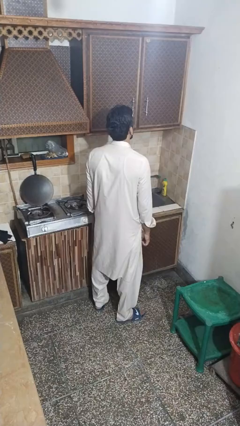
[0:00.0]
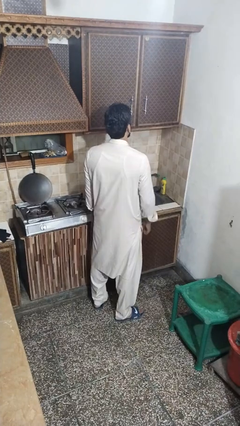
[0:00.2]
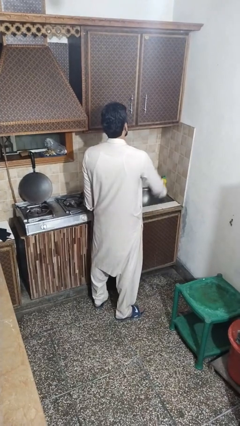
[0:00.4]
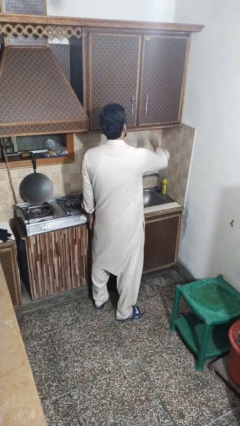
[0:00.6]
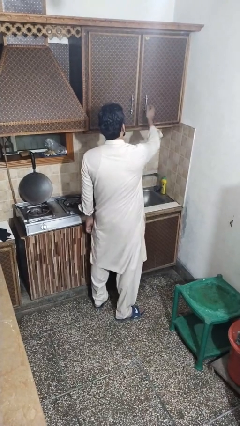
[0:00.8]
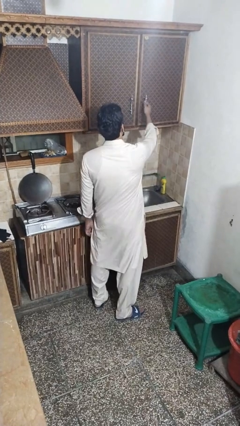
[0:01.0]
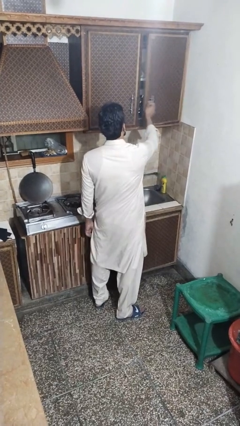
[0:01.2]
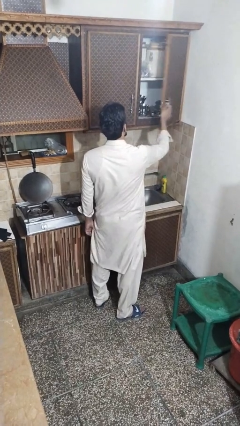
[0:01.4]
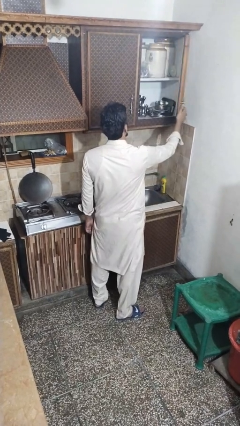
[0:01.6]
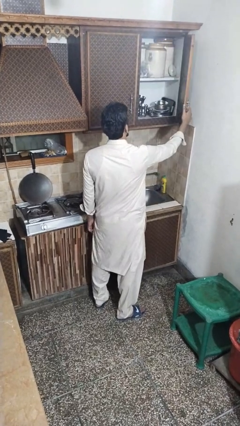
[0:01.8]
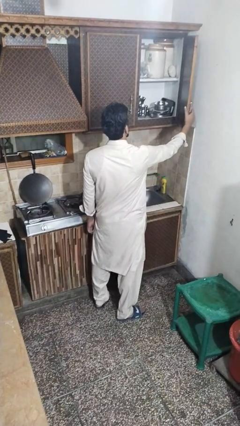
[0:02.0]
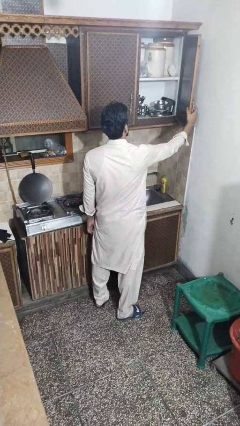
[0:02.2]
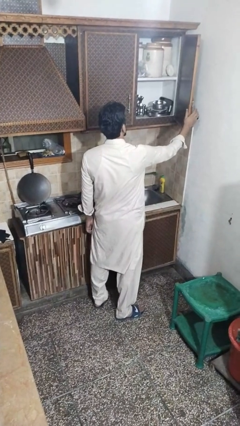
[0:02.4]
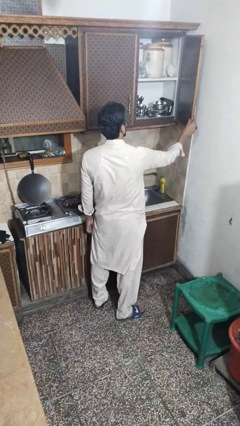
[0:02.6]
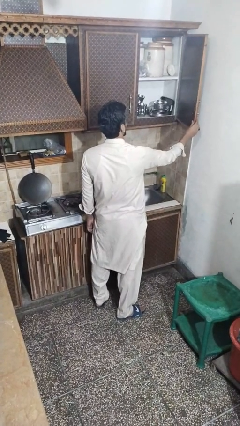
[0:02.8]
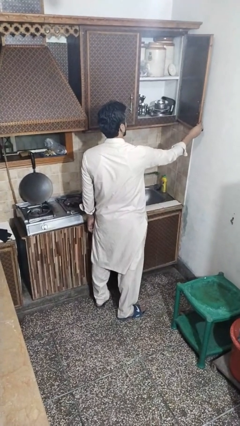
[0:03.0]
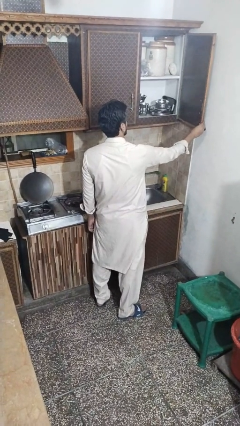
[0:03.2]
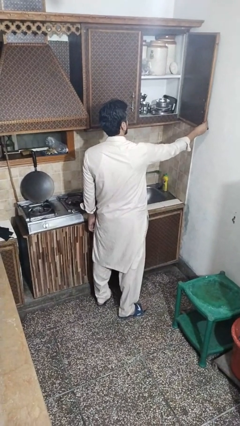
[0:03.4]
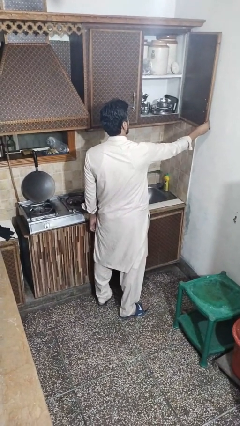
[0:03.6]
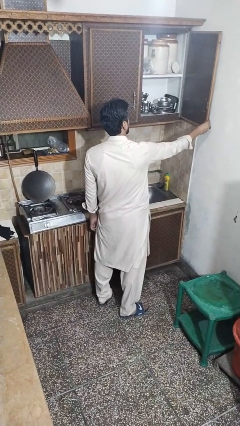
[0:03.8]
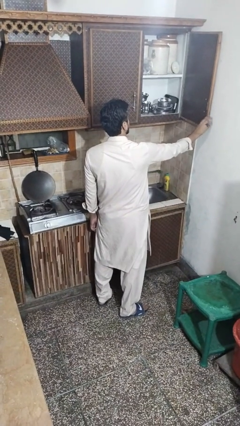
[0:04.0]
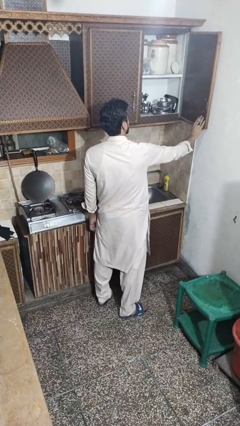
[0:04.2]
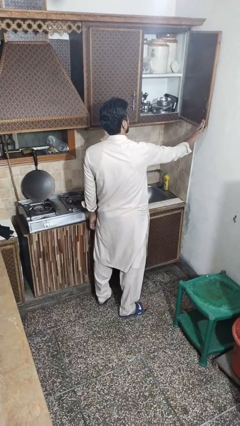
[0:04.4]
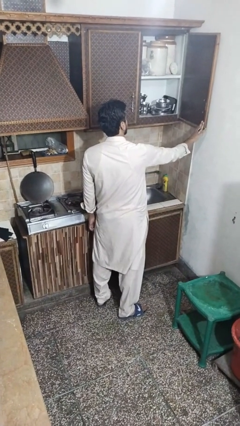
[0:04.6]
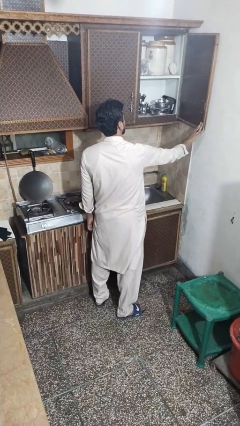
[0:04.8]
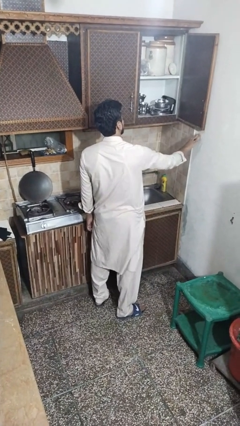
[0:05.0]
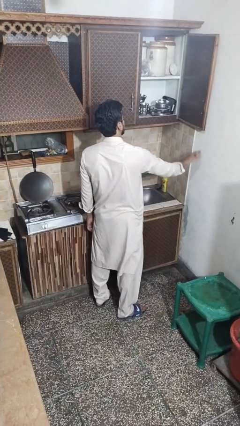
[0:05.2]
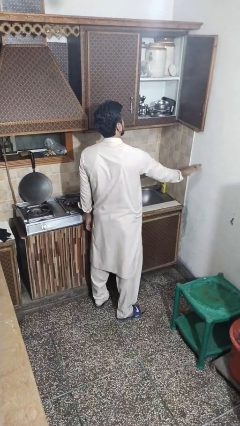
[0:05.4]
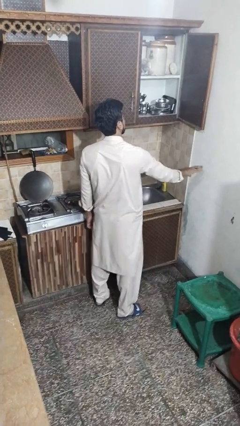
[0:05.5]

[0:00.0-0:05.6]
person opens cabinet

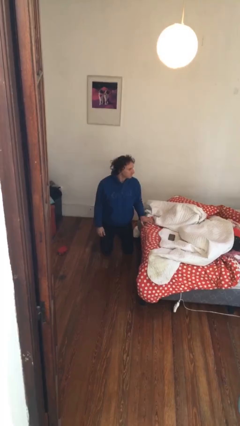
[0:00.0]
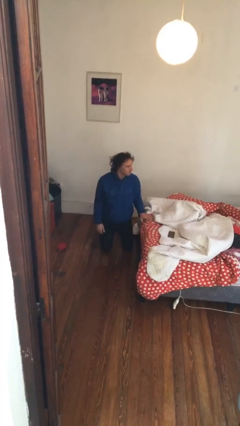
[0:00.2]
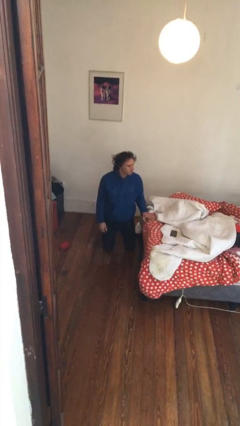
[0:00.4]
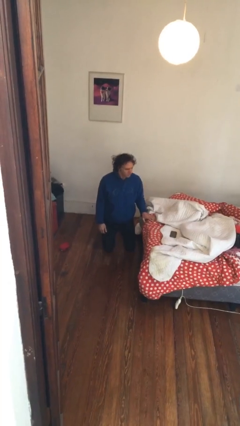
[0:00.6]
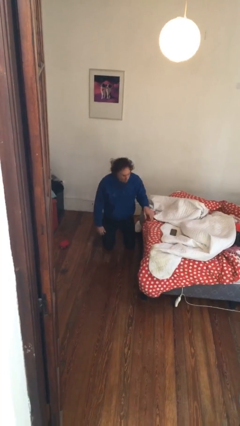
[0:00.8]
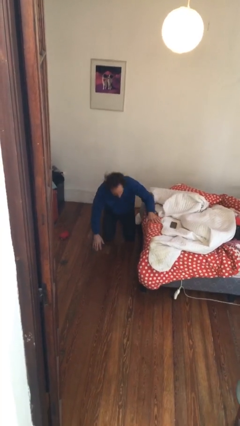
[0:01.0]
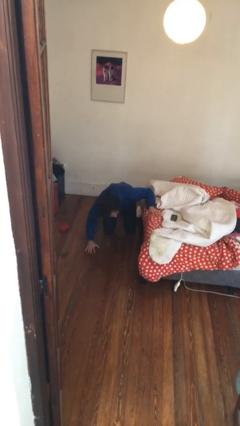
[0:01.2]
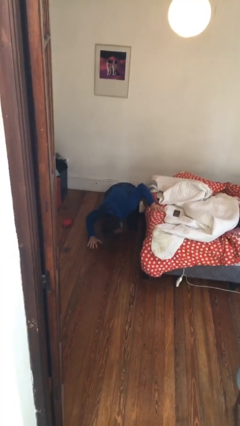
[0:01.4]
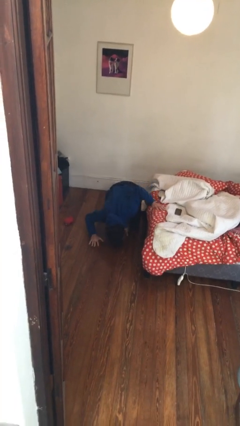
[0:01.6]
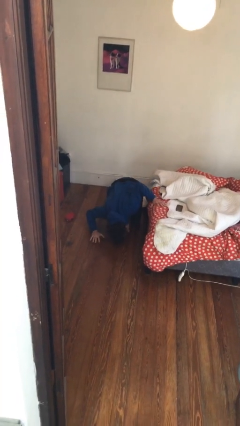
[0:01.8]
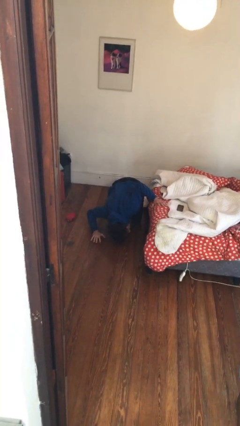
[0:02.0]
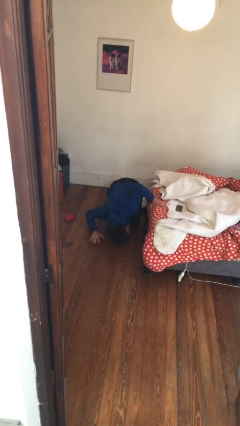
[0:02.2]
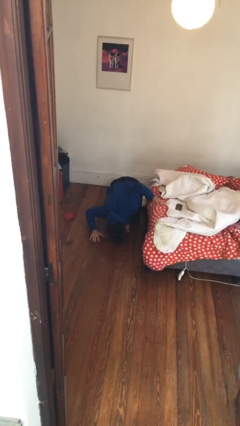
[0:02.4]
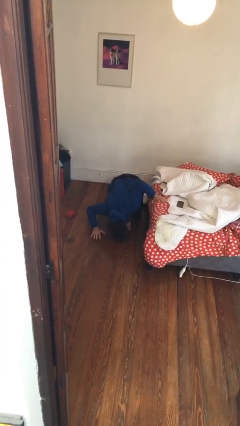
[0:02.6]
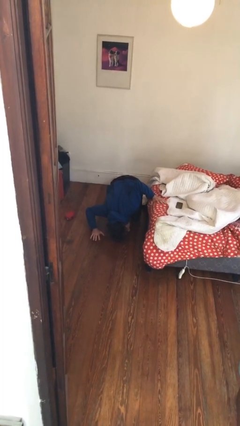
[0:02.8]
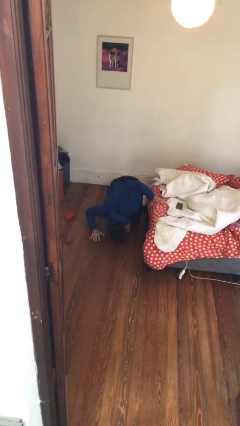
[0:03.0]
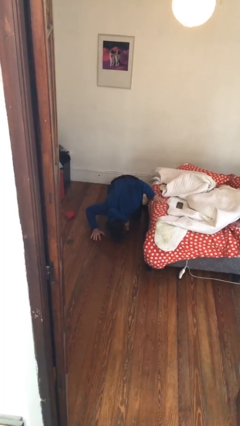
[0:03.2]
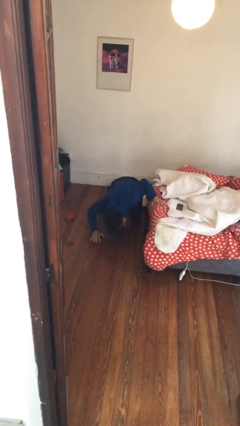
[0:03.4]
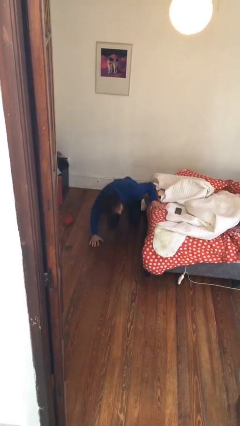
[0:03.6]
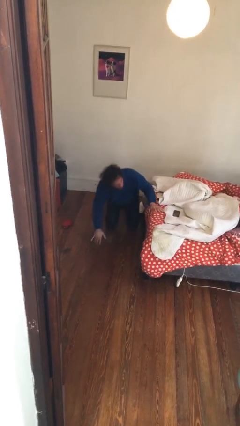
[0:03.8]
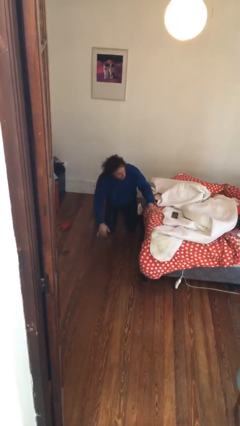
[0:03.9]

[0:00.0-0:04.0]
person searches under bed

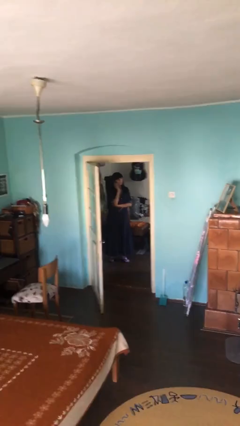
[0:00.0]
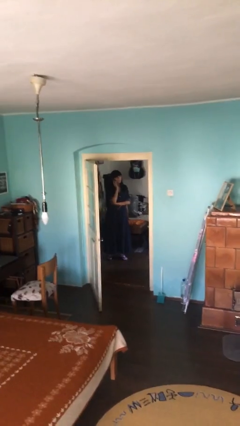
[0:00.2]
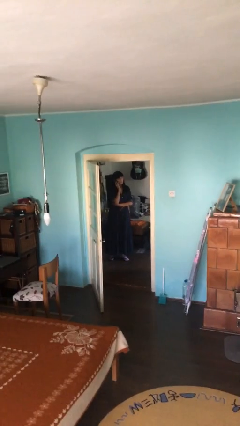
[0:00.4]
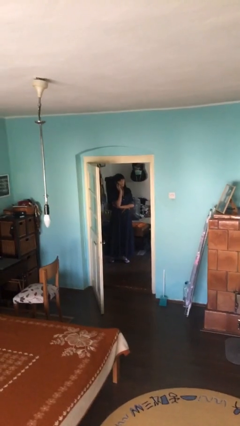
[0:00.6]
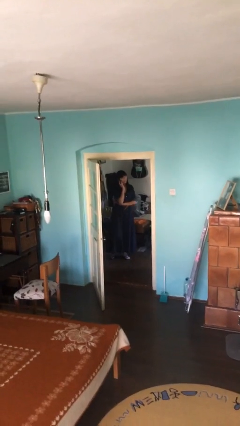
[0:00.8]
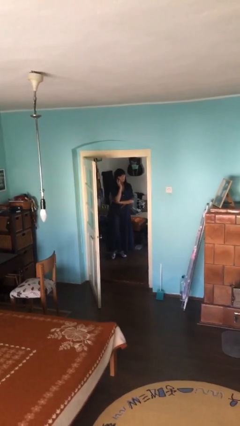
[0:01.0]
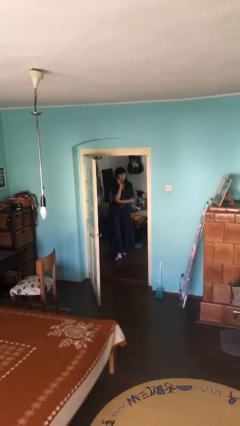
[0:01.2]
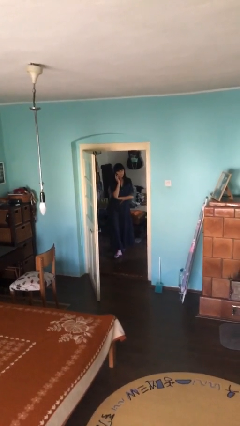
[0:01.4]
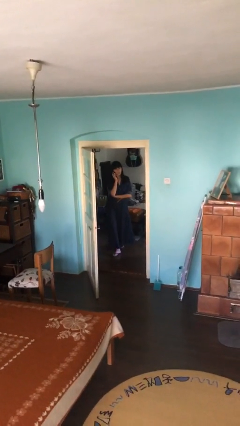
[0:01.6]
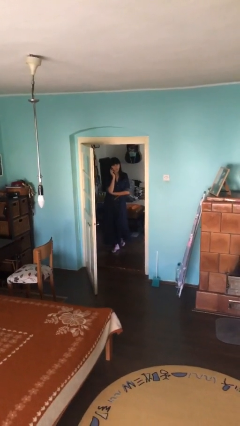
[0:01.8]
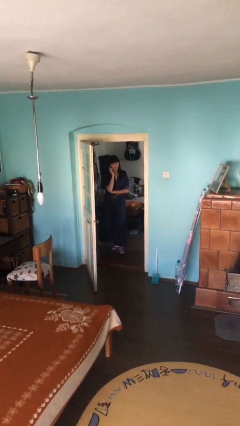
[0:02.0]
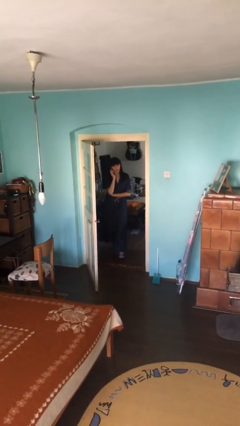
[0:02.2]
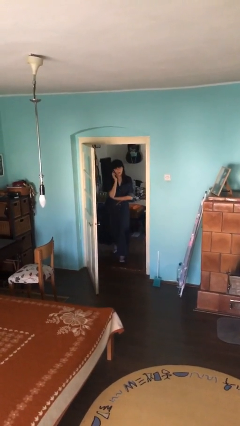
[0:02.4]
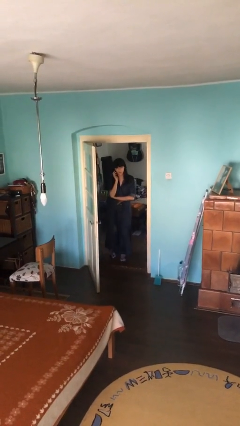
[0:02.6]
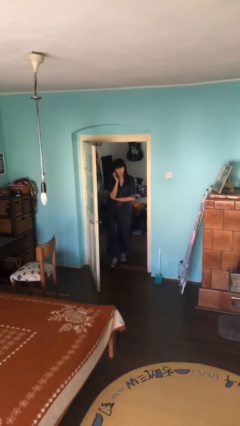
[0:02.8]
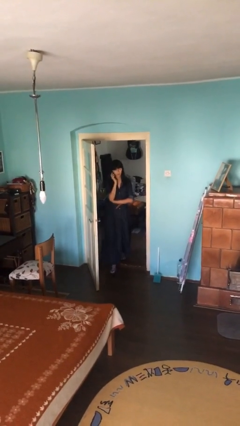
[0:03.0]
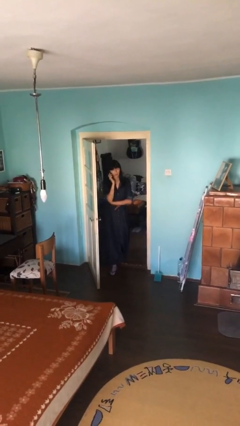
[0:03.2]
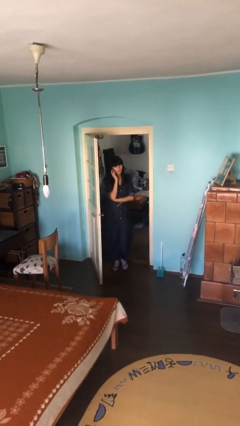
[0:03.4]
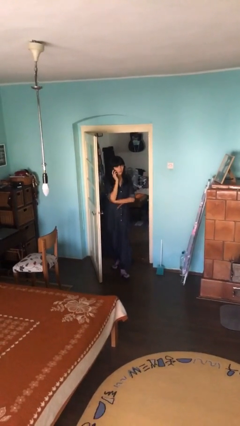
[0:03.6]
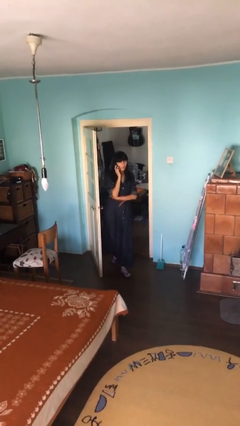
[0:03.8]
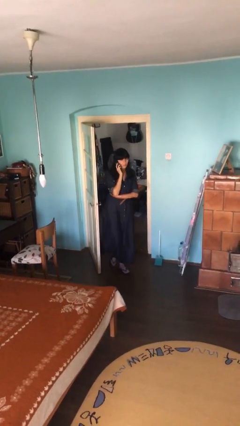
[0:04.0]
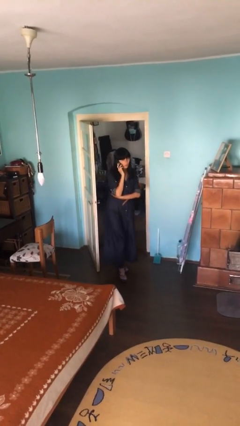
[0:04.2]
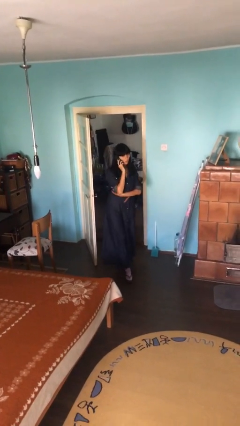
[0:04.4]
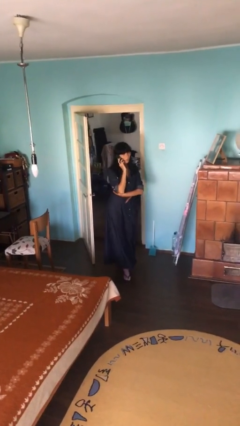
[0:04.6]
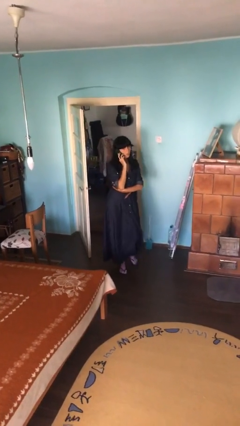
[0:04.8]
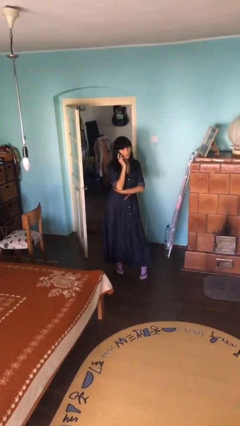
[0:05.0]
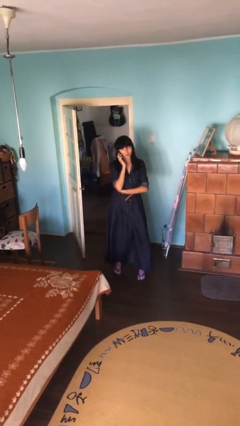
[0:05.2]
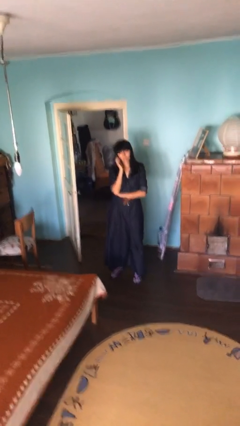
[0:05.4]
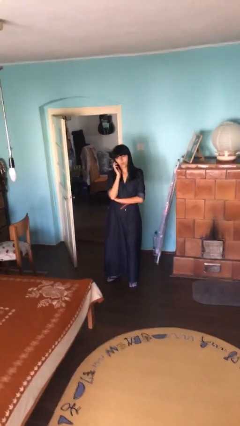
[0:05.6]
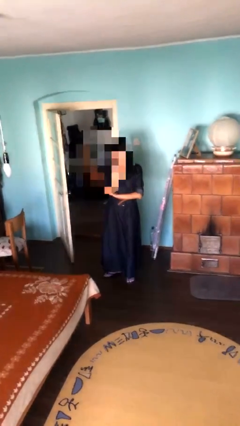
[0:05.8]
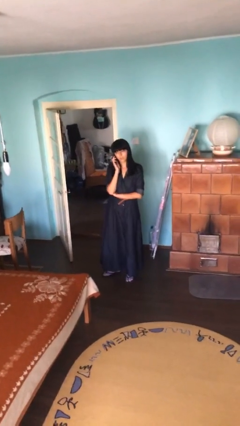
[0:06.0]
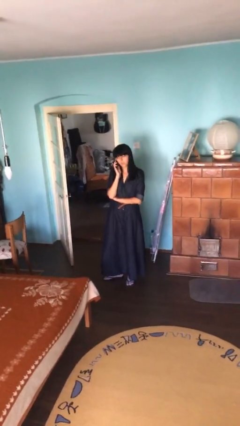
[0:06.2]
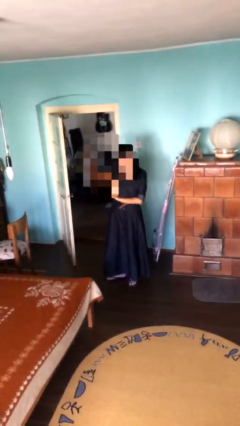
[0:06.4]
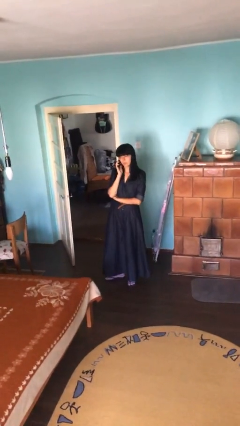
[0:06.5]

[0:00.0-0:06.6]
person enters scene through structure

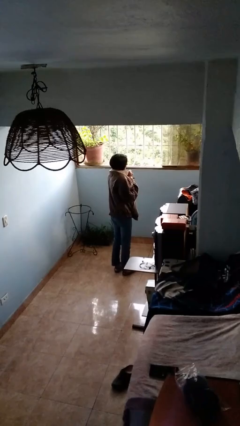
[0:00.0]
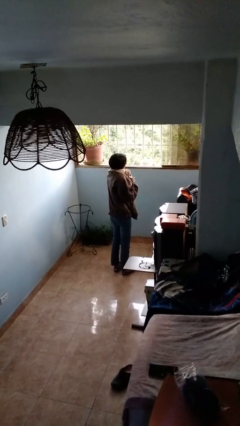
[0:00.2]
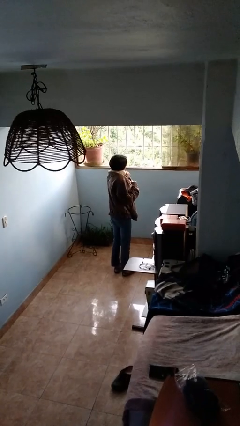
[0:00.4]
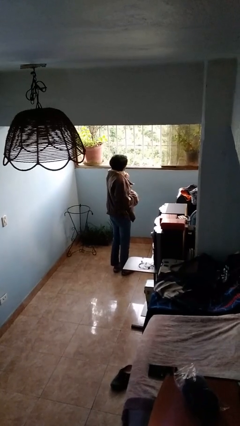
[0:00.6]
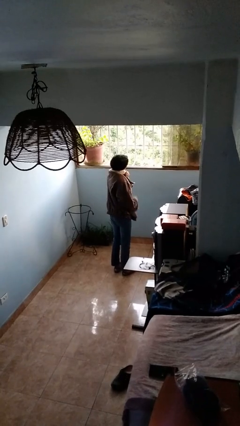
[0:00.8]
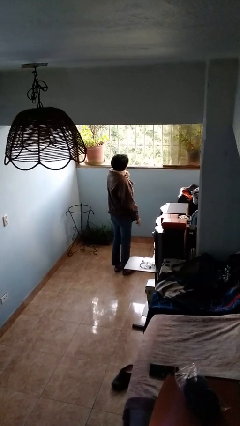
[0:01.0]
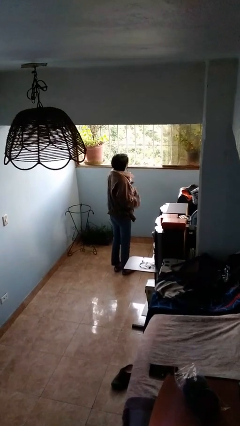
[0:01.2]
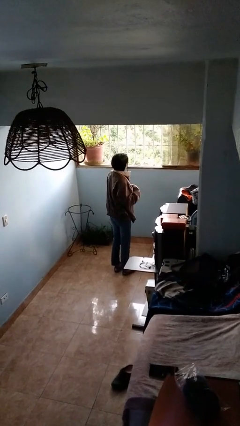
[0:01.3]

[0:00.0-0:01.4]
person unzips jacket

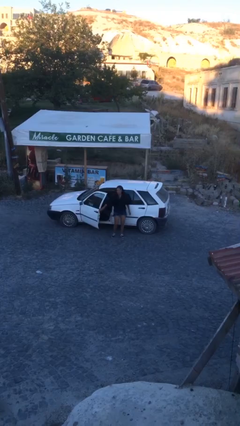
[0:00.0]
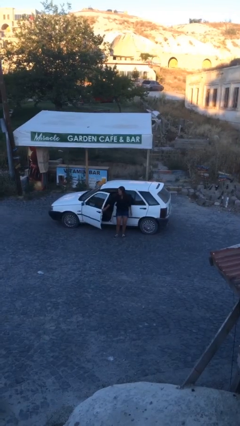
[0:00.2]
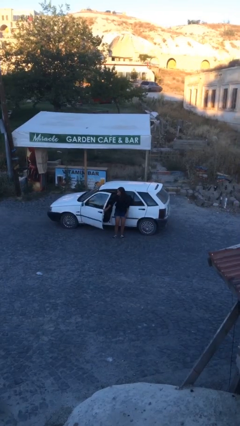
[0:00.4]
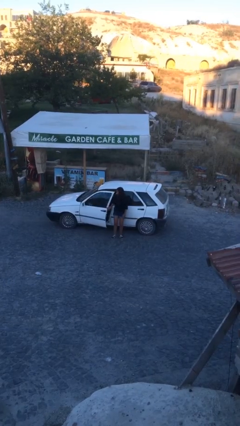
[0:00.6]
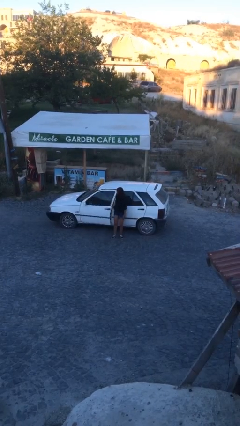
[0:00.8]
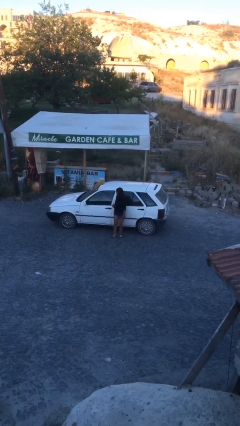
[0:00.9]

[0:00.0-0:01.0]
person closes car door
